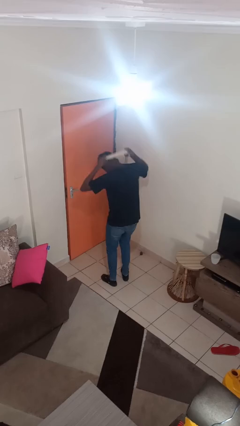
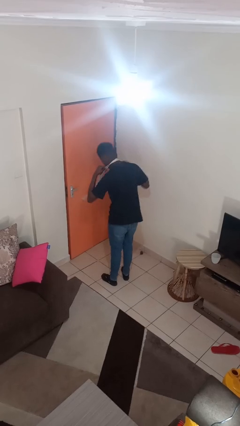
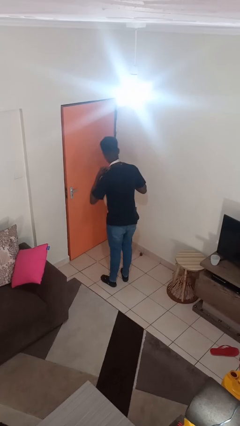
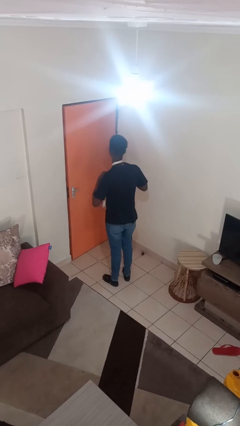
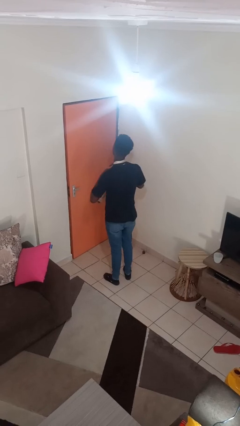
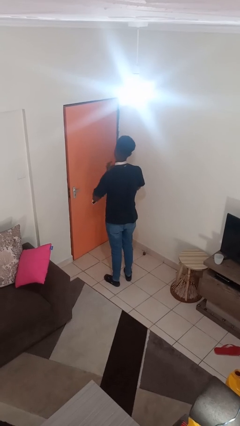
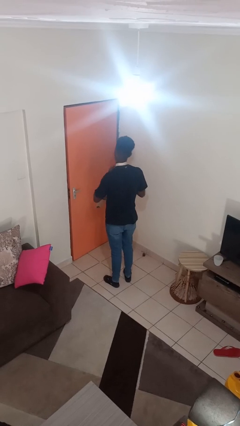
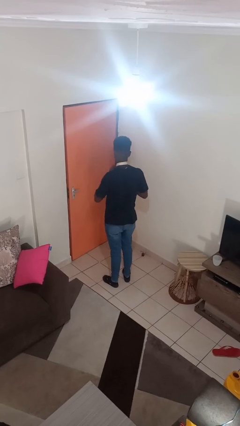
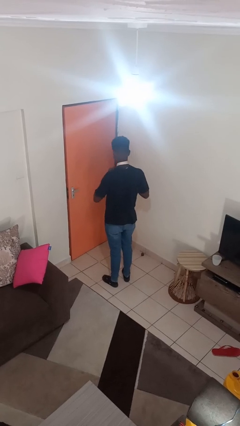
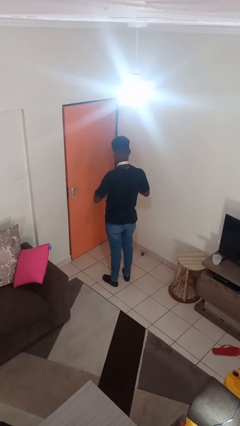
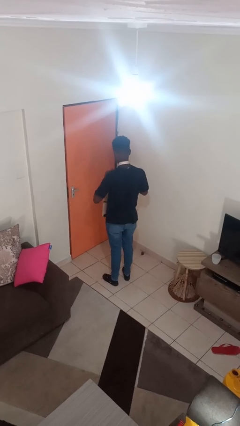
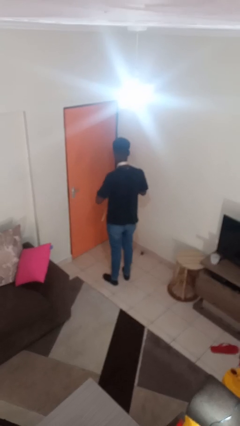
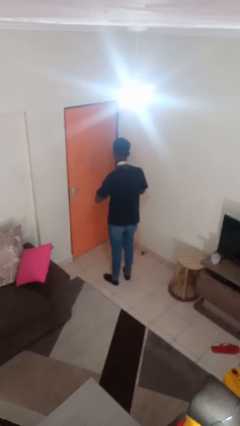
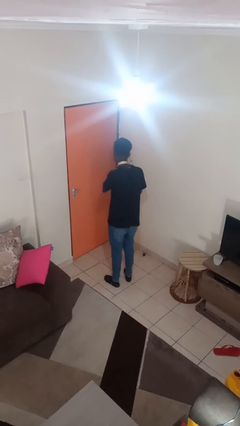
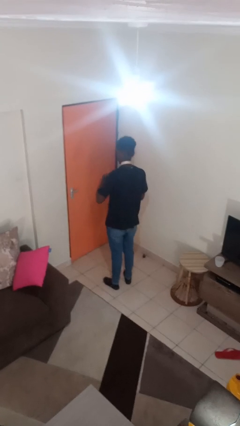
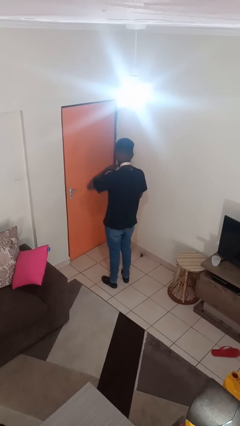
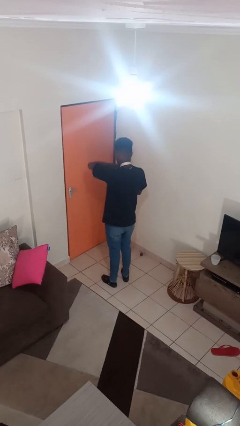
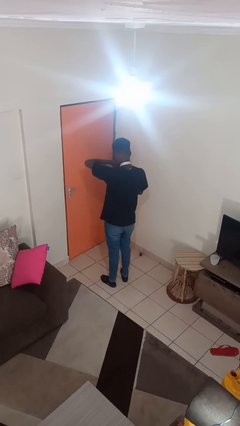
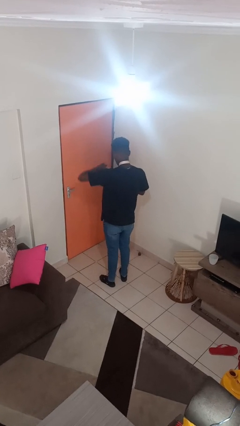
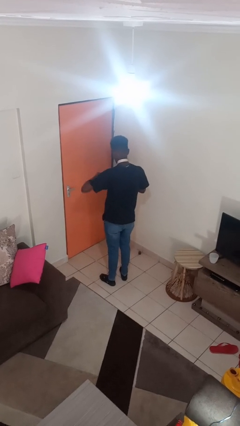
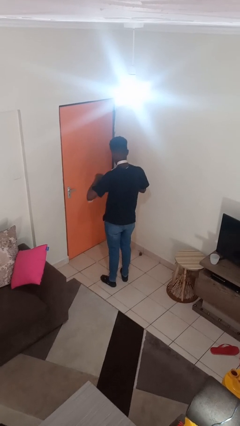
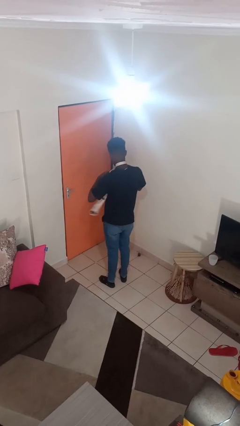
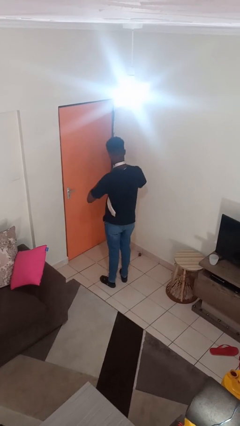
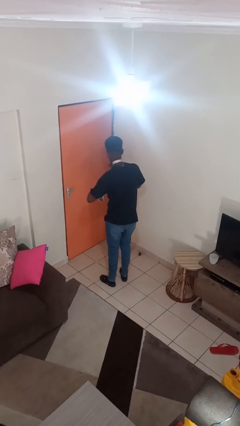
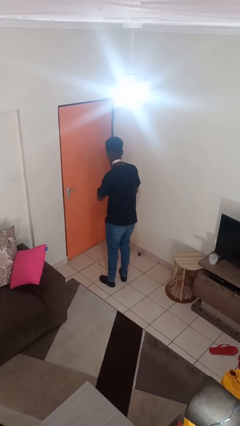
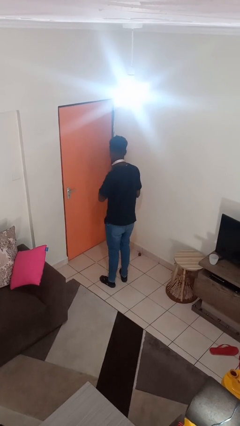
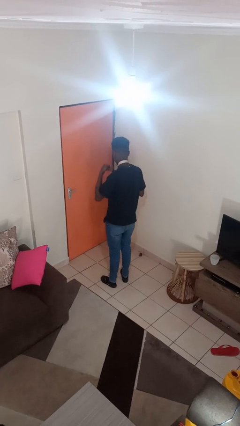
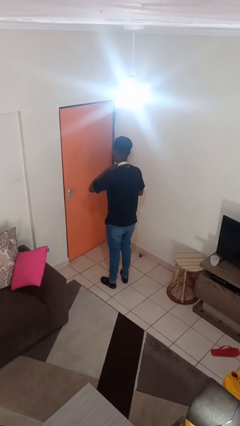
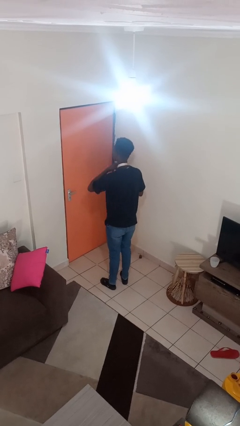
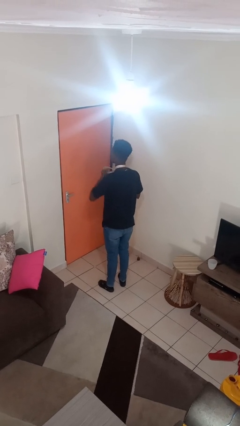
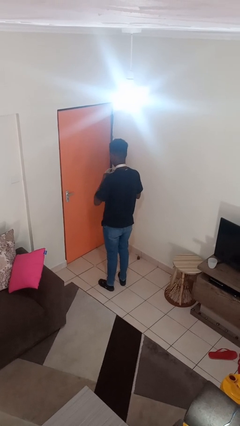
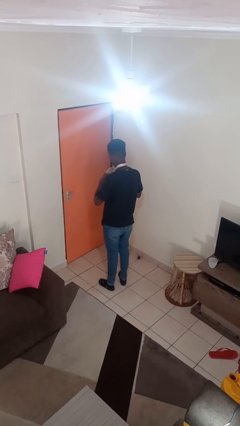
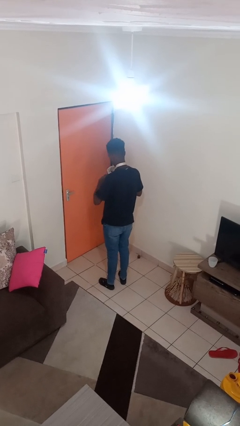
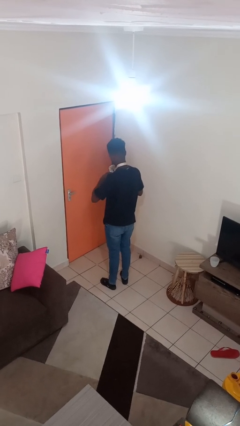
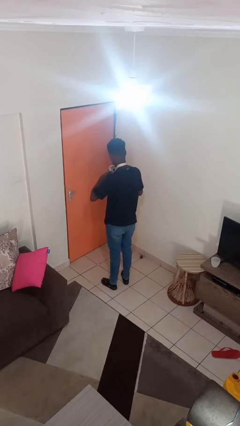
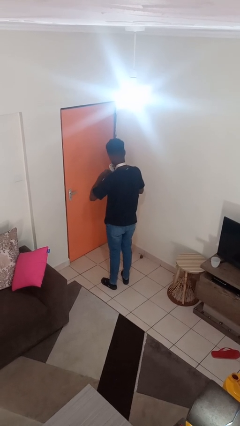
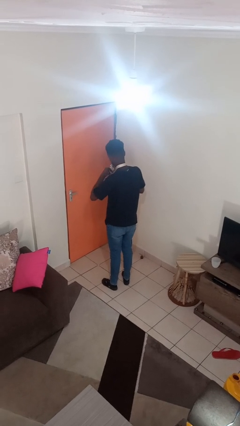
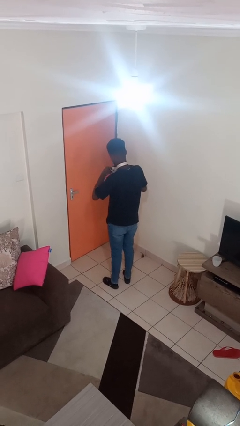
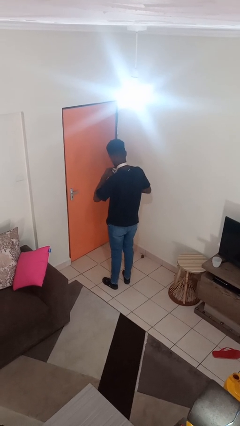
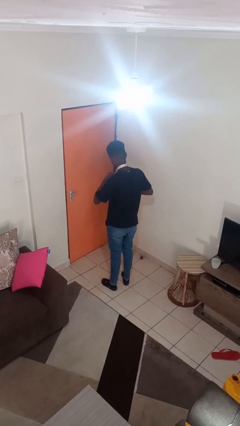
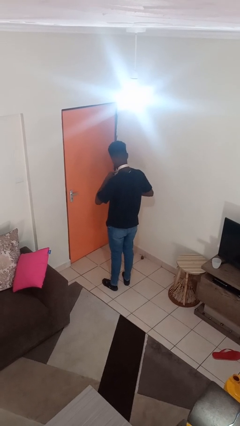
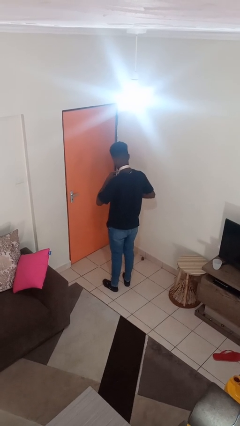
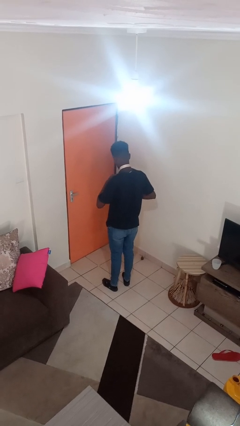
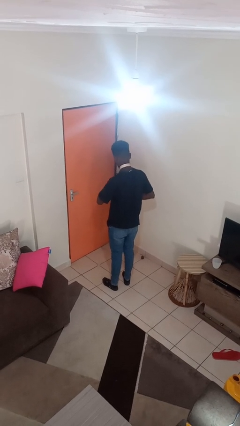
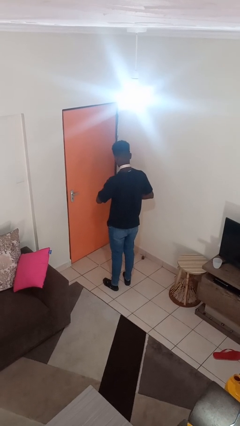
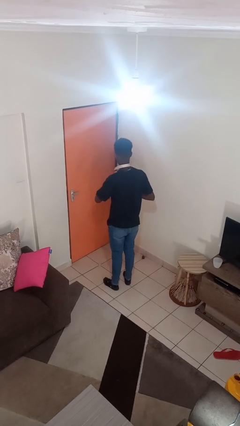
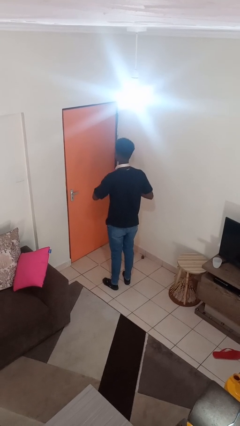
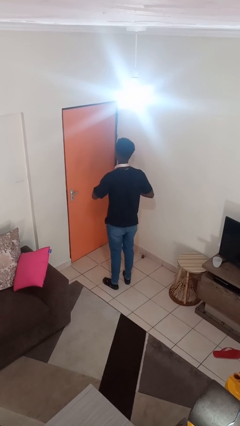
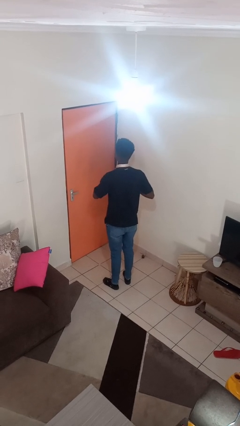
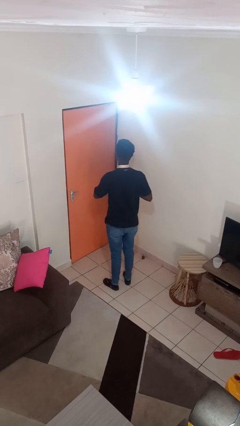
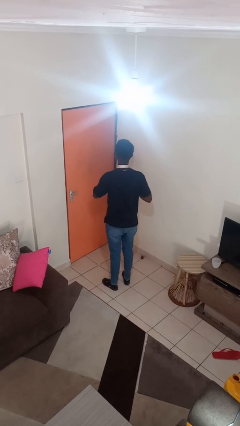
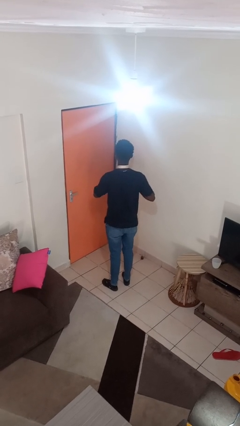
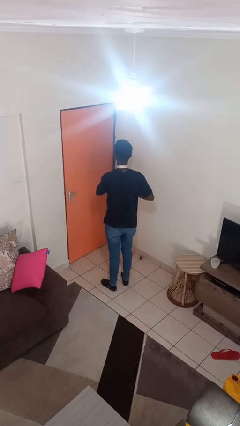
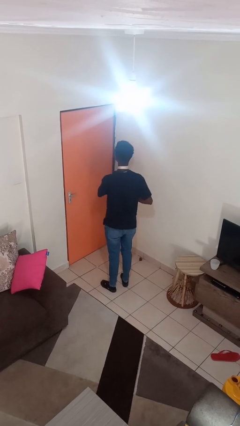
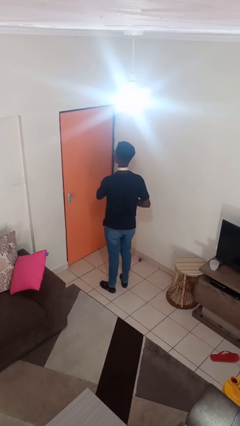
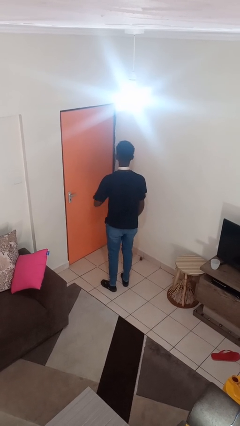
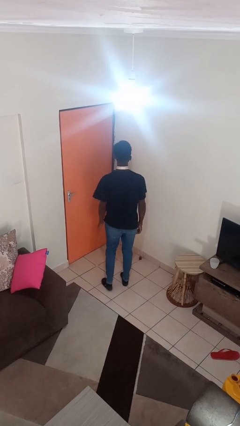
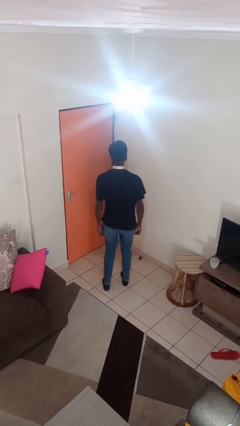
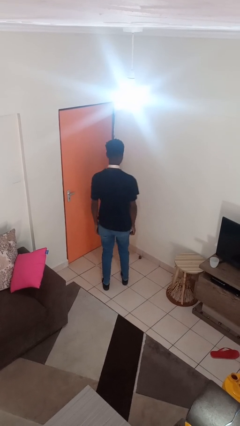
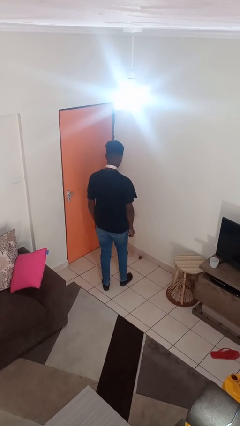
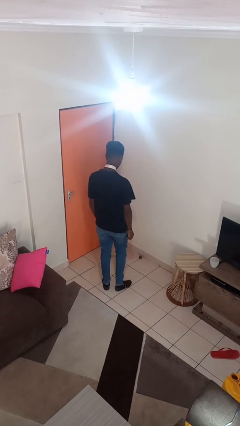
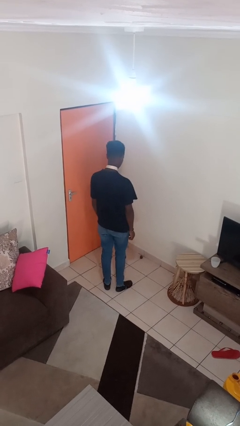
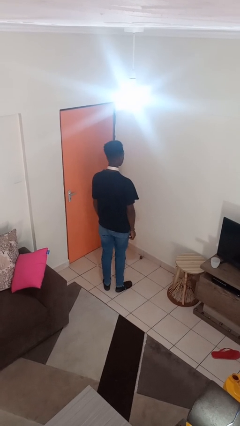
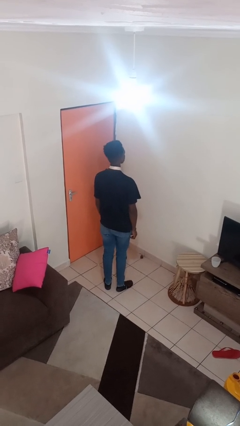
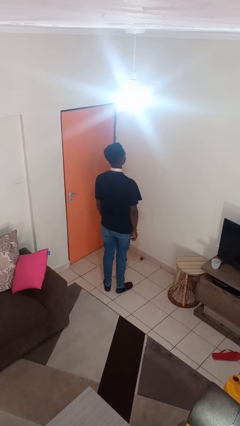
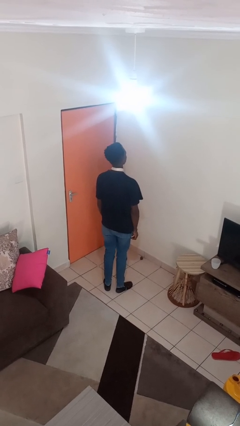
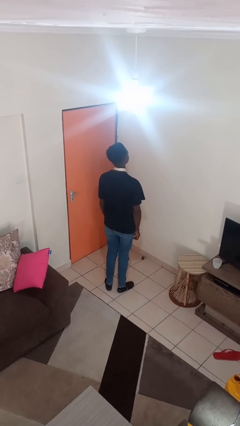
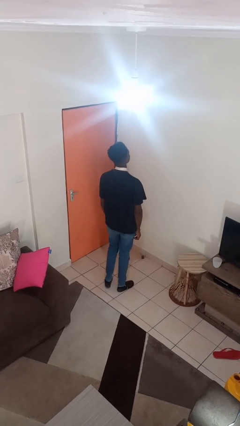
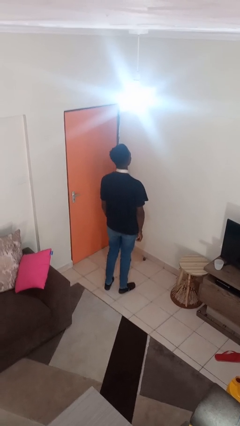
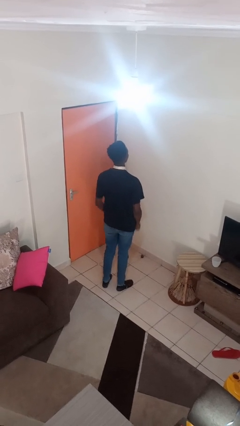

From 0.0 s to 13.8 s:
person puts on necktie

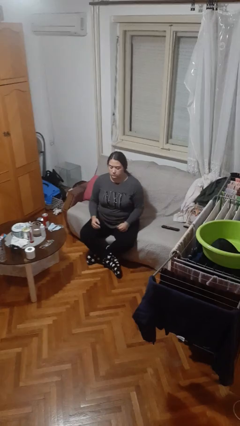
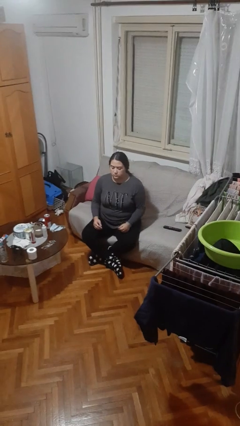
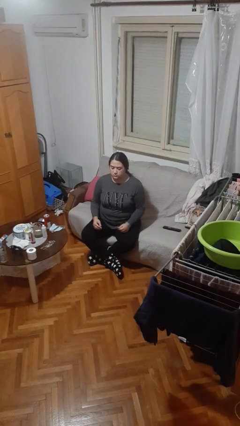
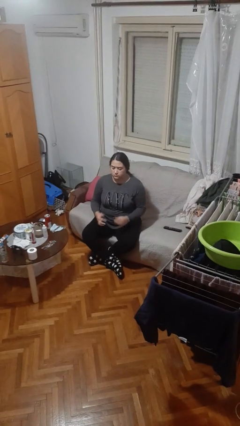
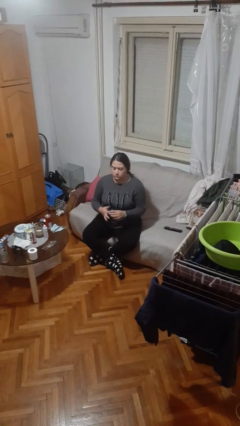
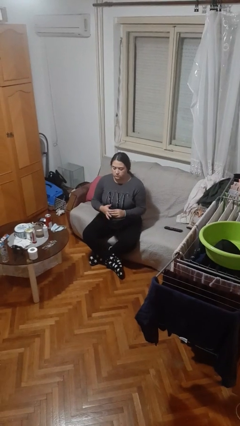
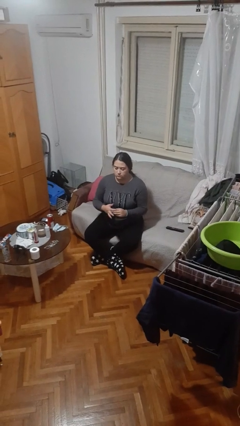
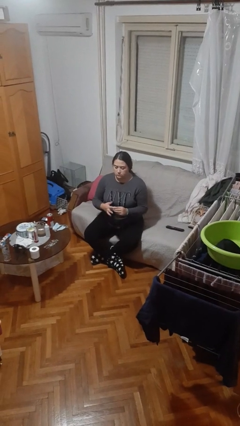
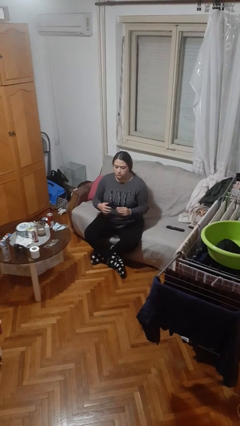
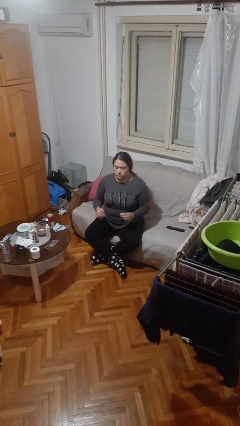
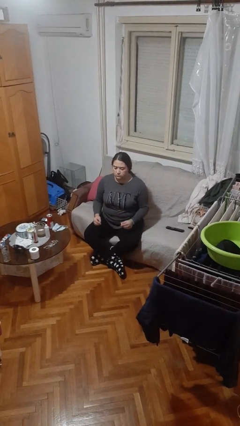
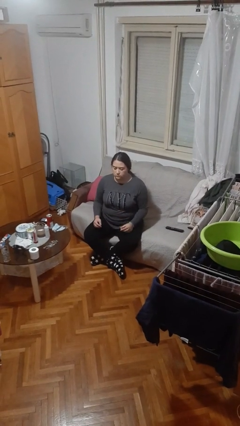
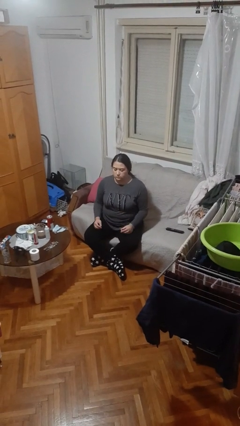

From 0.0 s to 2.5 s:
person takes off ring

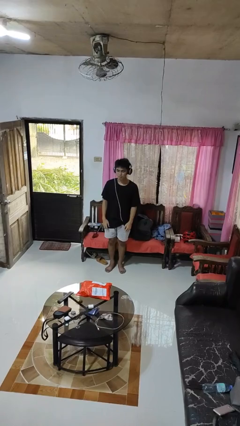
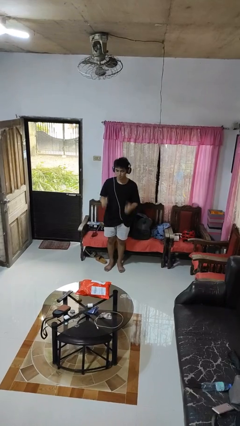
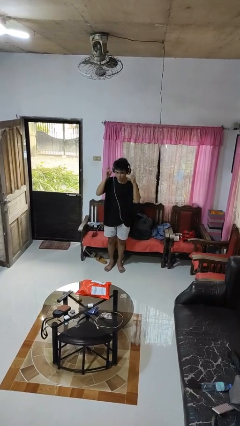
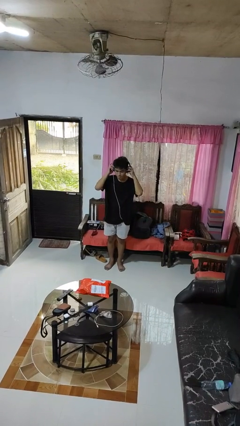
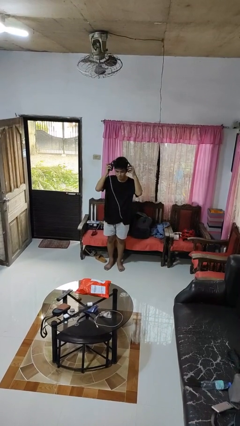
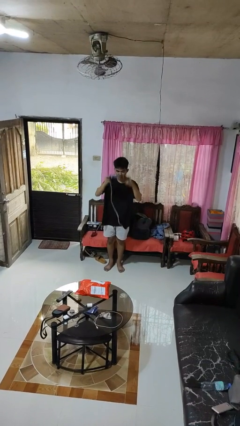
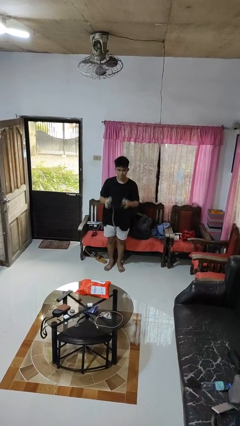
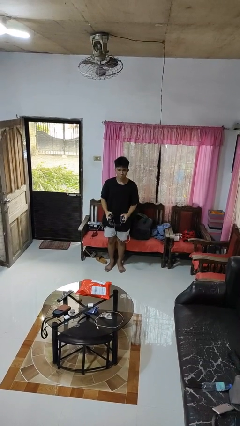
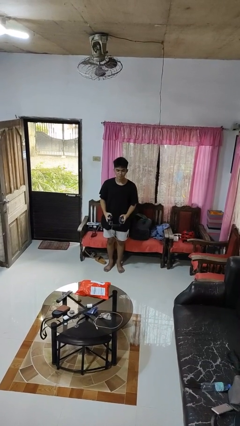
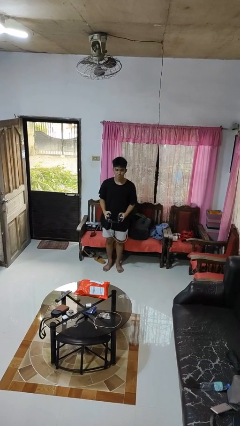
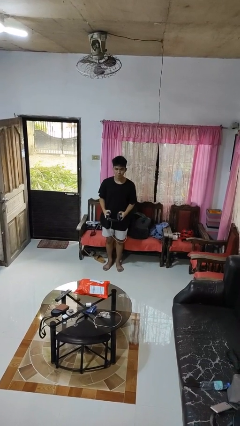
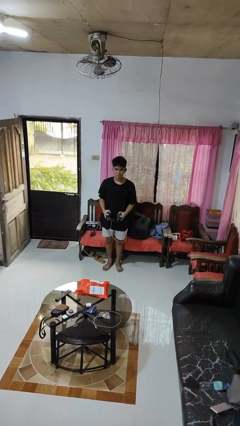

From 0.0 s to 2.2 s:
person takes off headphones
